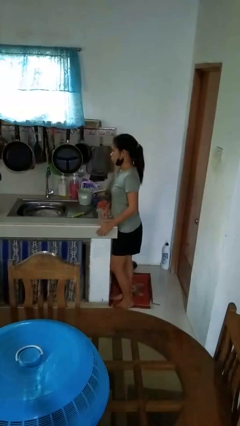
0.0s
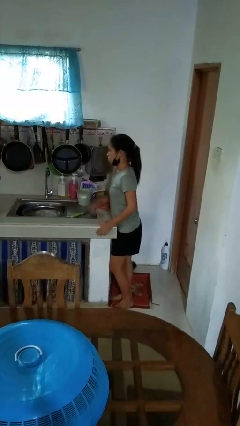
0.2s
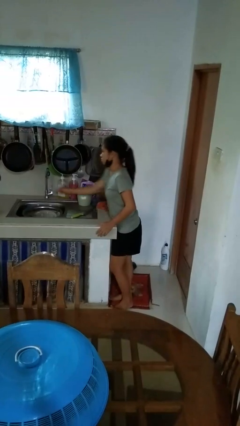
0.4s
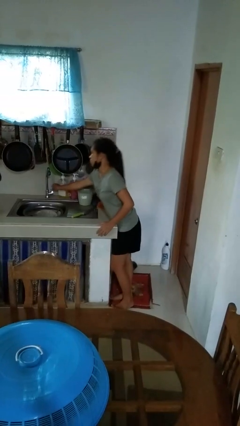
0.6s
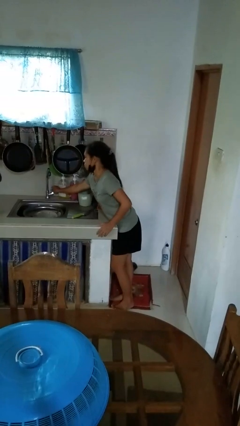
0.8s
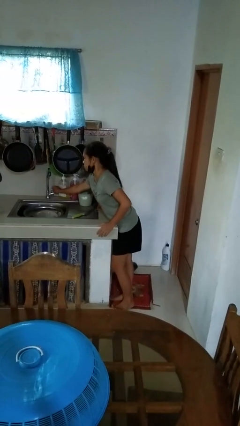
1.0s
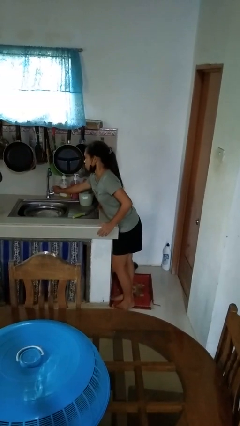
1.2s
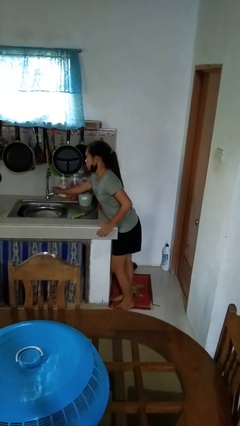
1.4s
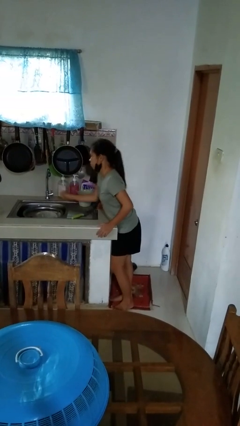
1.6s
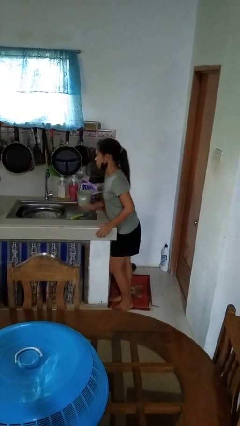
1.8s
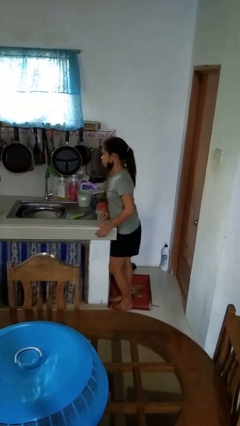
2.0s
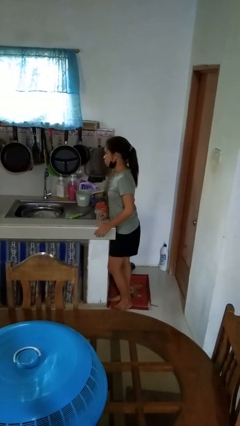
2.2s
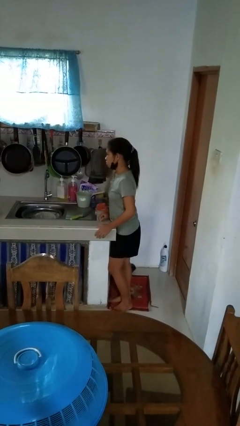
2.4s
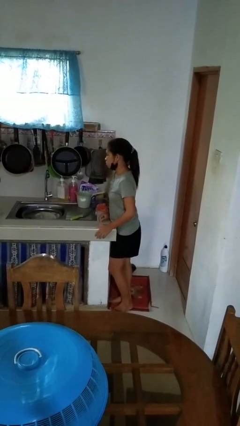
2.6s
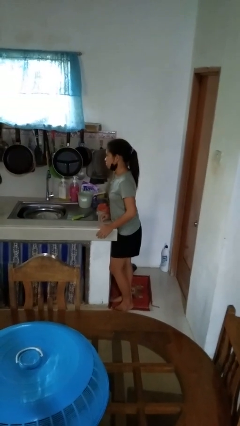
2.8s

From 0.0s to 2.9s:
person turns on faucet

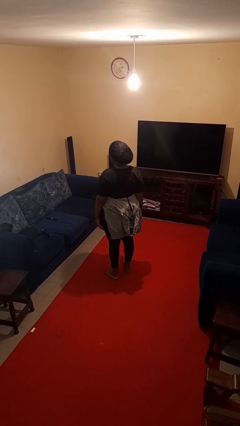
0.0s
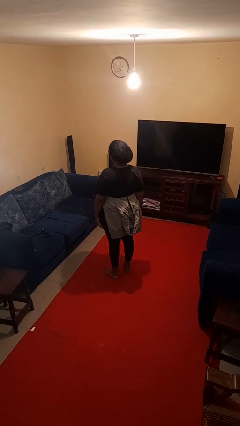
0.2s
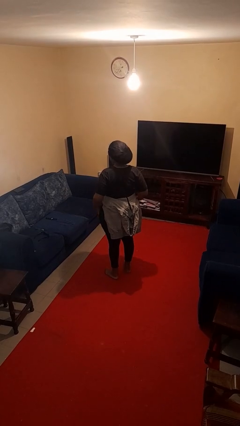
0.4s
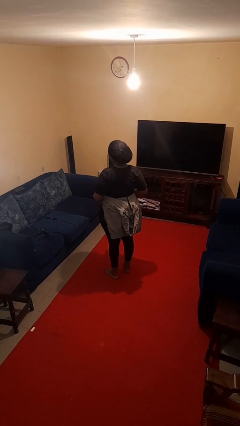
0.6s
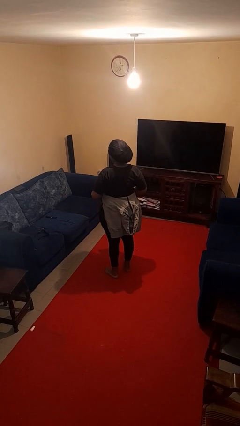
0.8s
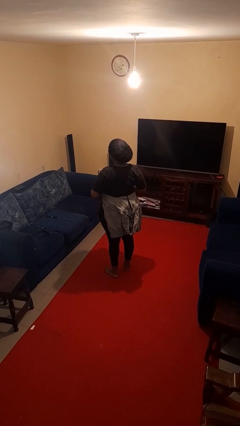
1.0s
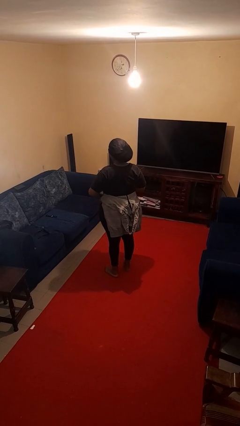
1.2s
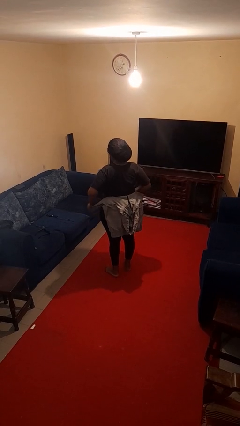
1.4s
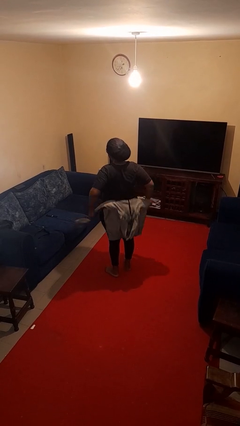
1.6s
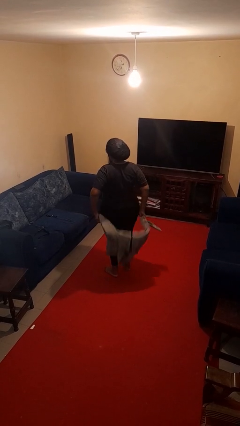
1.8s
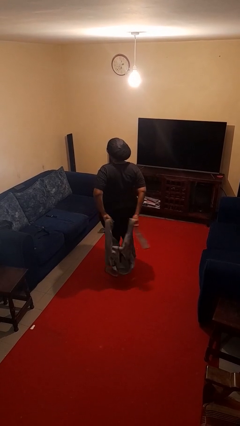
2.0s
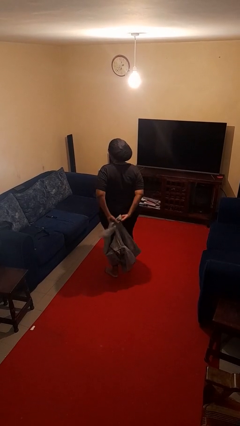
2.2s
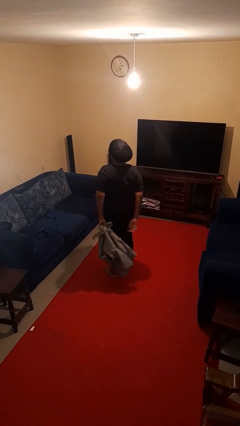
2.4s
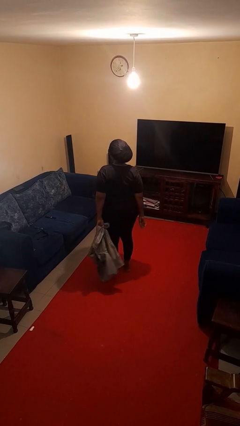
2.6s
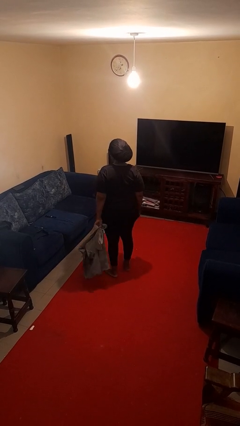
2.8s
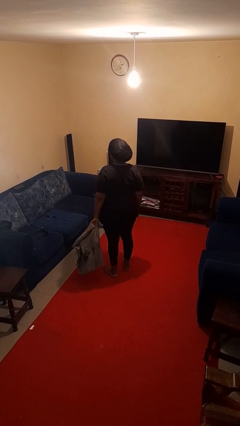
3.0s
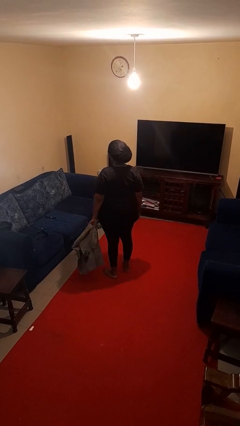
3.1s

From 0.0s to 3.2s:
person unties jacket around waist

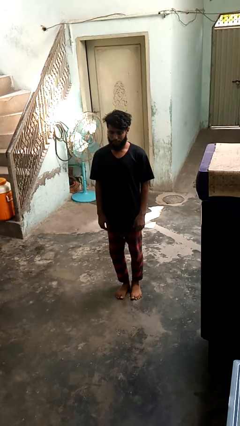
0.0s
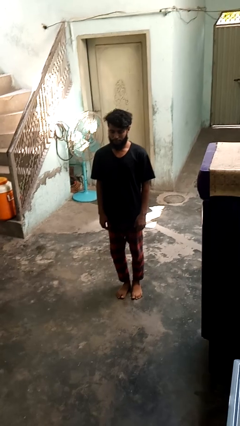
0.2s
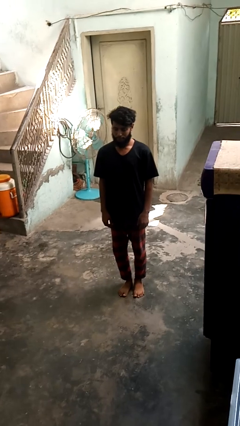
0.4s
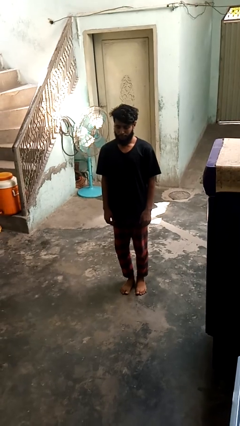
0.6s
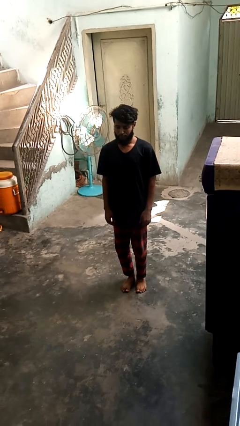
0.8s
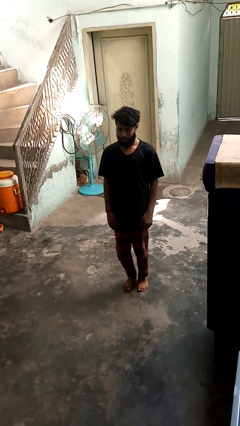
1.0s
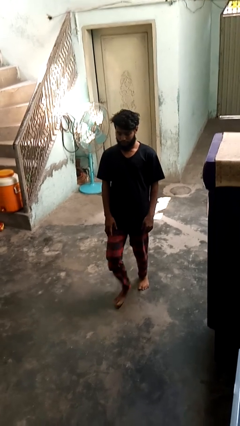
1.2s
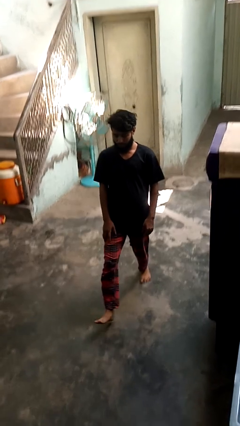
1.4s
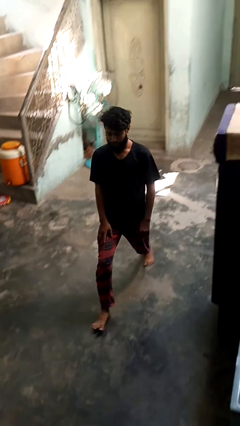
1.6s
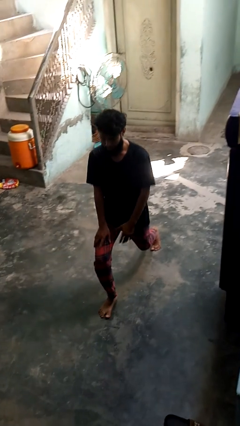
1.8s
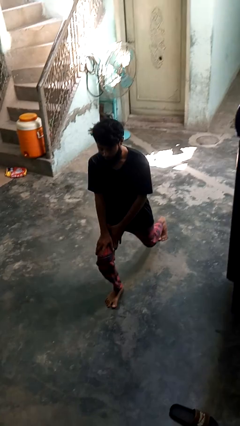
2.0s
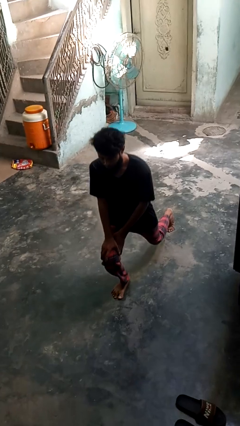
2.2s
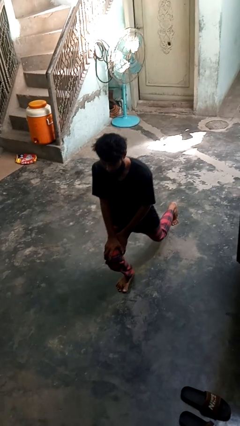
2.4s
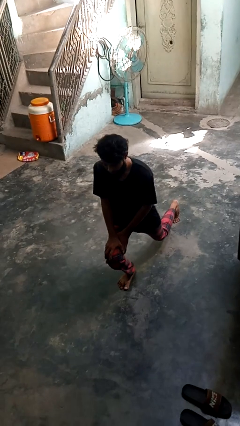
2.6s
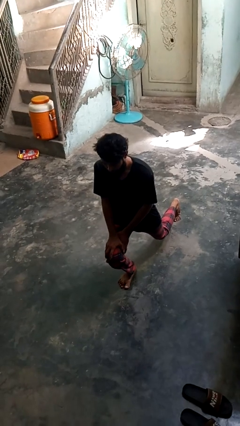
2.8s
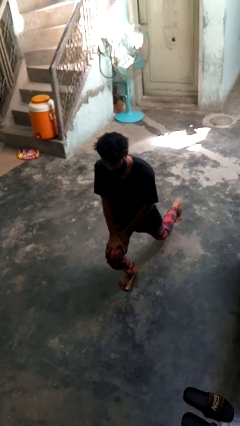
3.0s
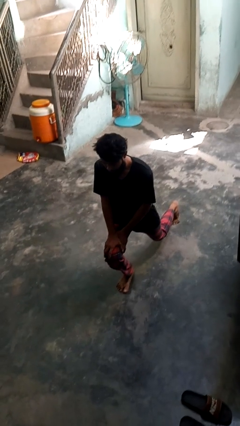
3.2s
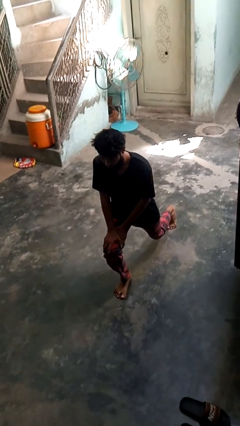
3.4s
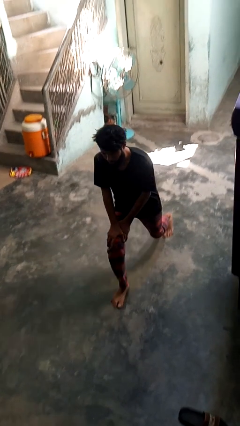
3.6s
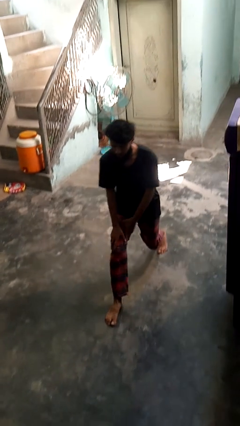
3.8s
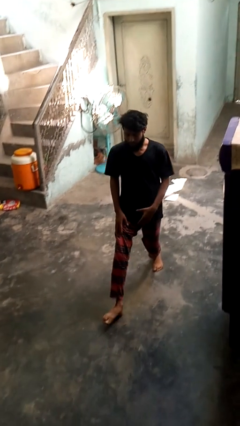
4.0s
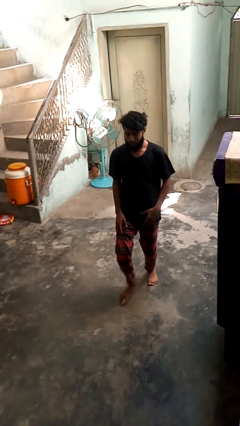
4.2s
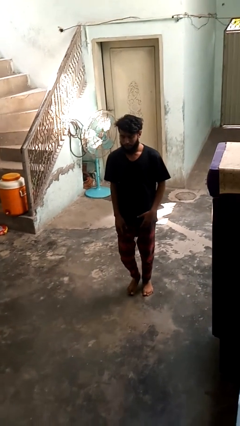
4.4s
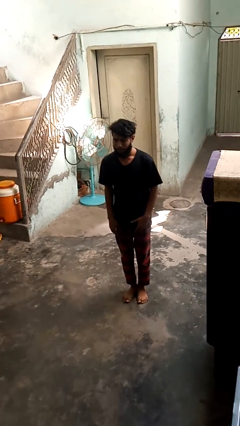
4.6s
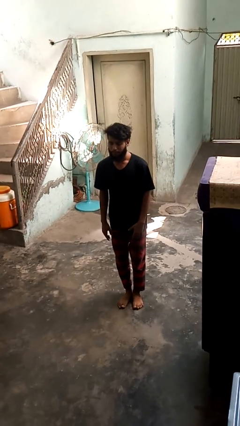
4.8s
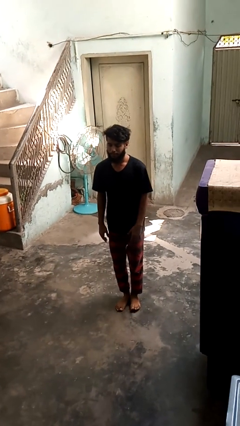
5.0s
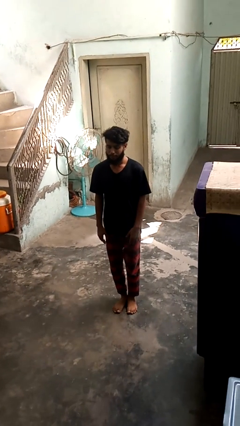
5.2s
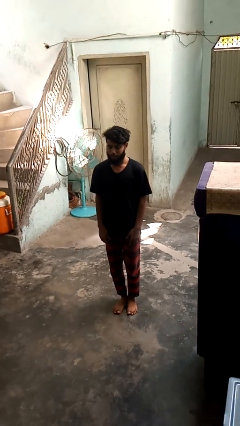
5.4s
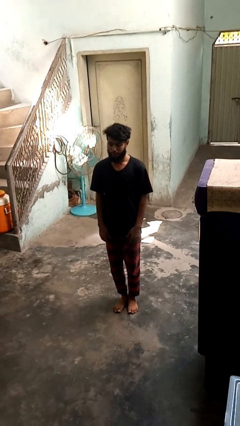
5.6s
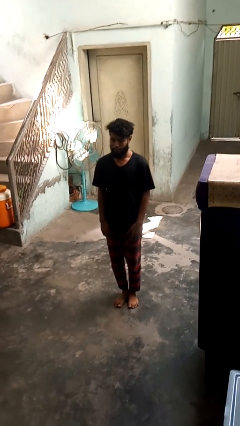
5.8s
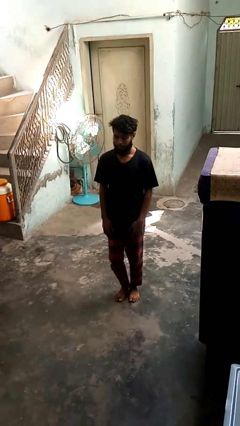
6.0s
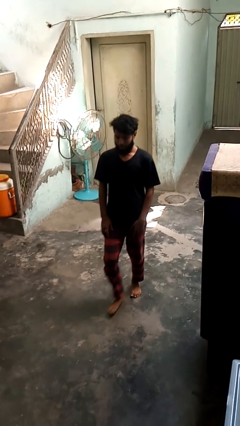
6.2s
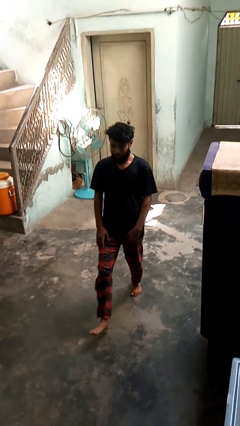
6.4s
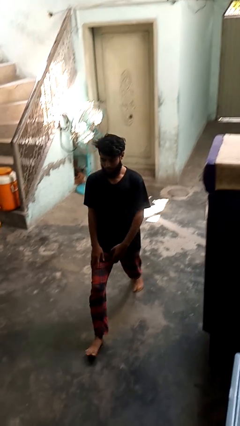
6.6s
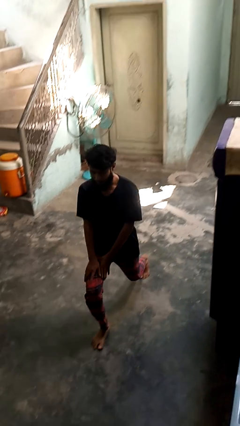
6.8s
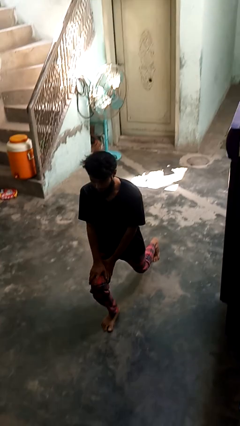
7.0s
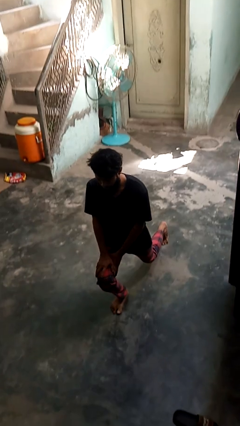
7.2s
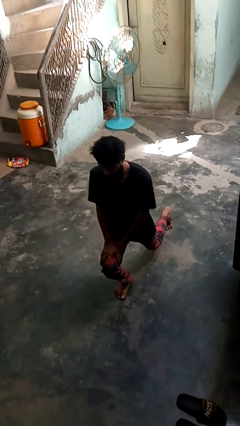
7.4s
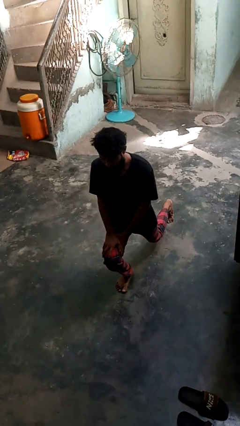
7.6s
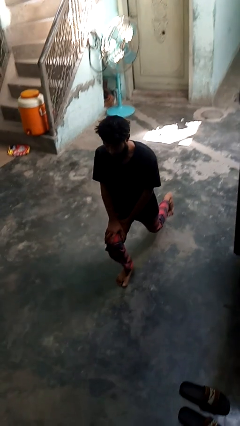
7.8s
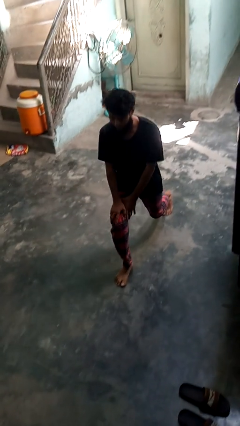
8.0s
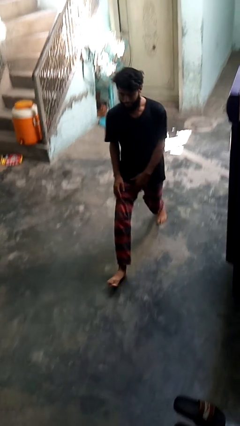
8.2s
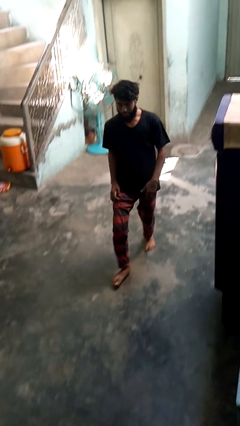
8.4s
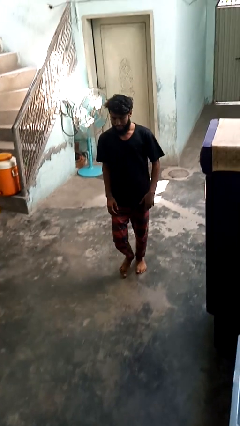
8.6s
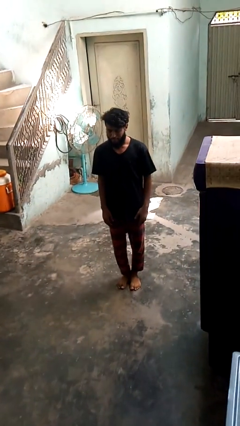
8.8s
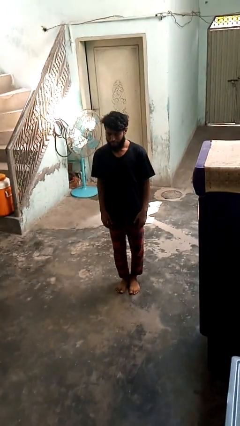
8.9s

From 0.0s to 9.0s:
person exercises with lunges

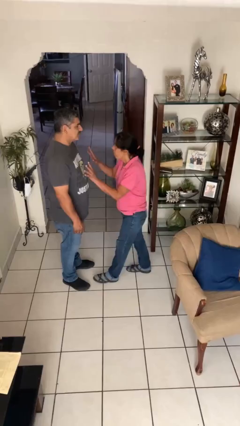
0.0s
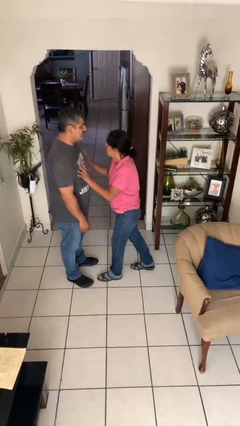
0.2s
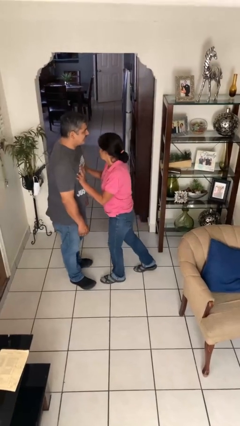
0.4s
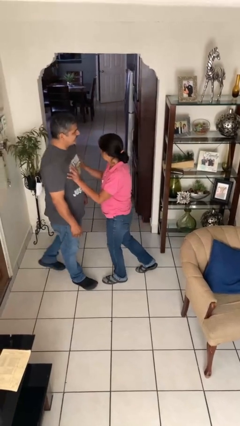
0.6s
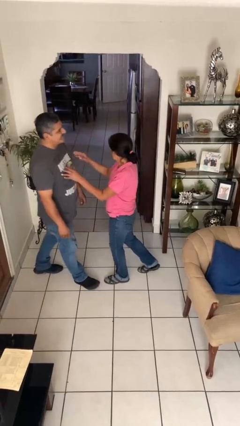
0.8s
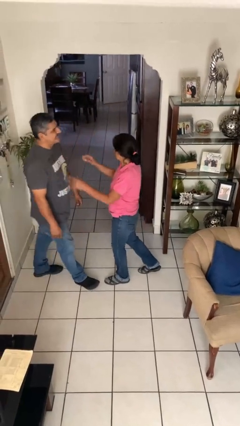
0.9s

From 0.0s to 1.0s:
person shoves person

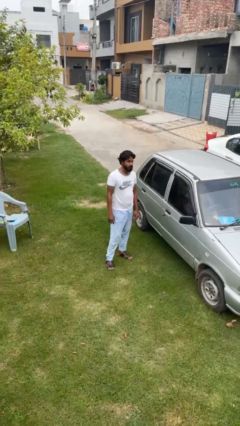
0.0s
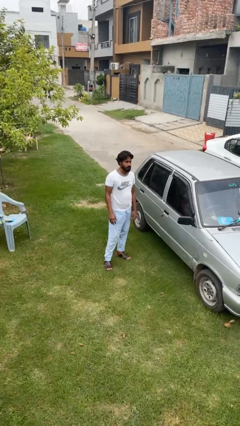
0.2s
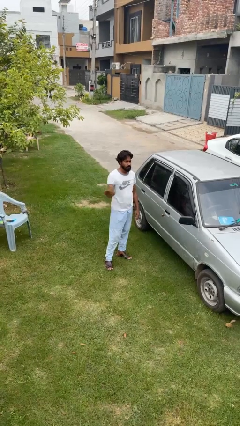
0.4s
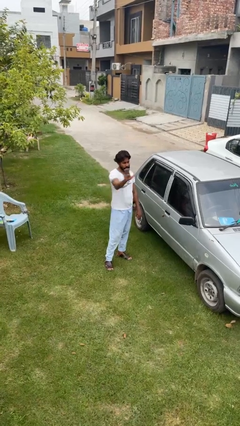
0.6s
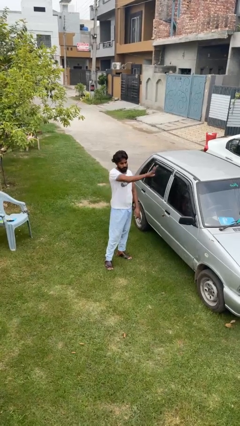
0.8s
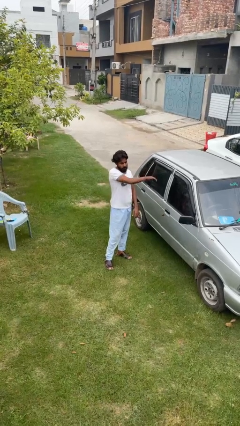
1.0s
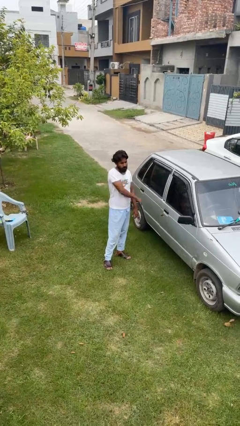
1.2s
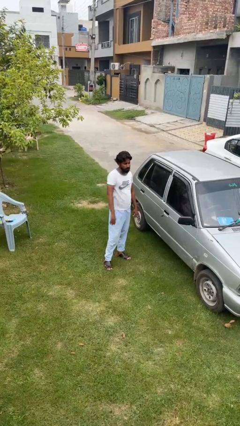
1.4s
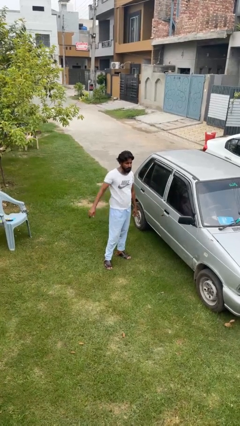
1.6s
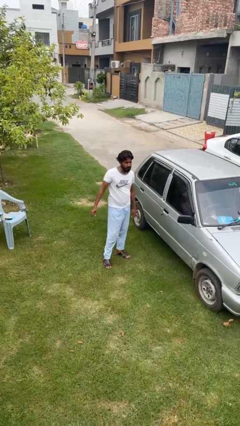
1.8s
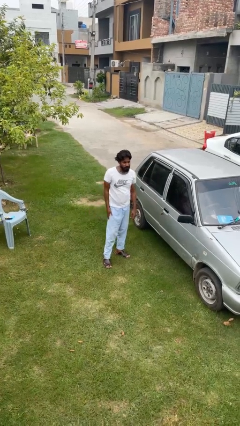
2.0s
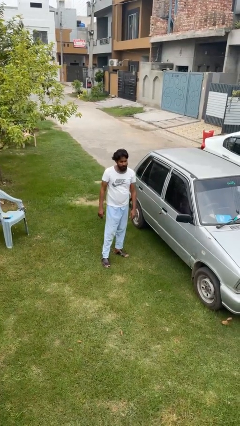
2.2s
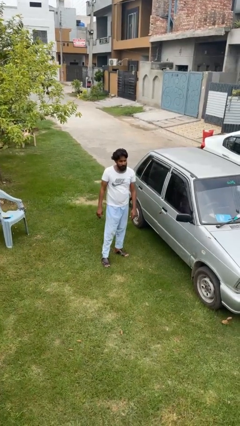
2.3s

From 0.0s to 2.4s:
person gestures swipe left
